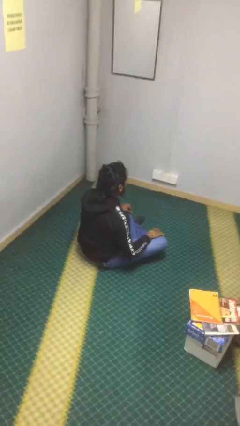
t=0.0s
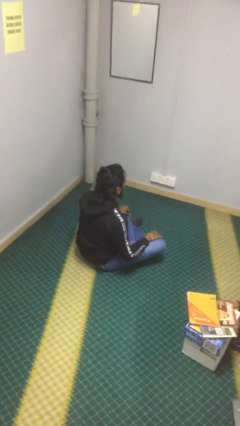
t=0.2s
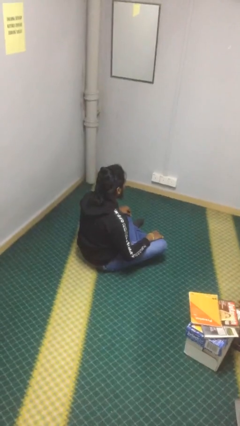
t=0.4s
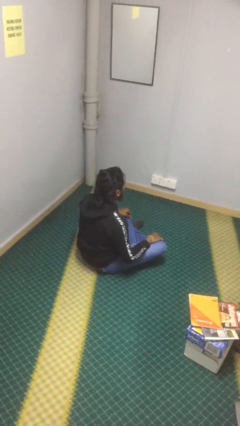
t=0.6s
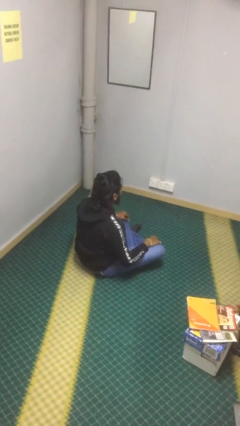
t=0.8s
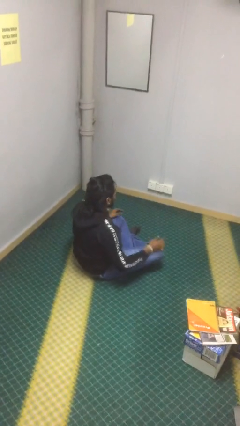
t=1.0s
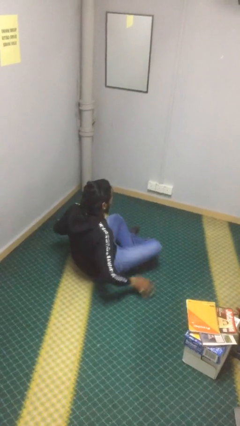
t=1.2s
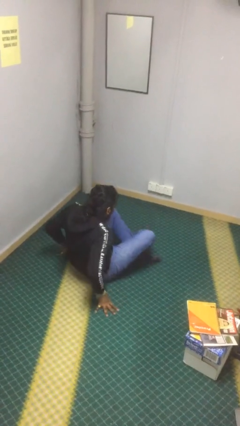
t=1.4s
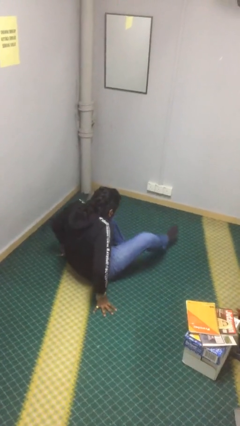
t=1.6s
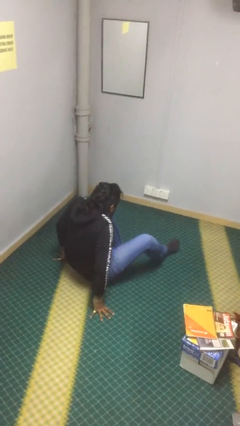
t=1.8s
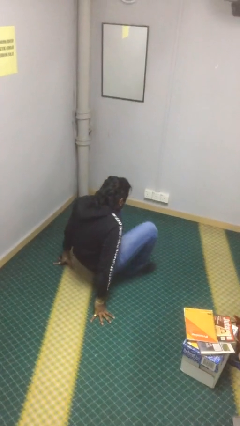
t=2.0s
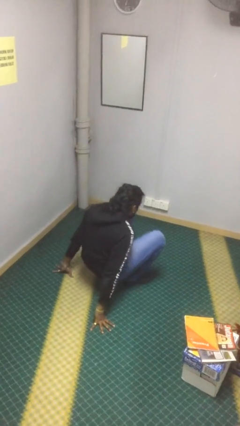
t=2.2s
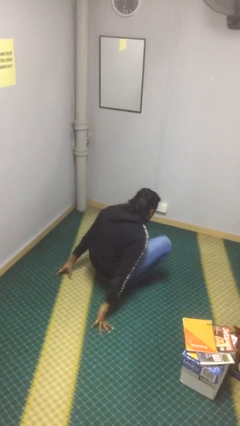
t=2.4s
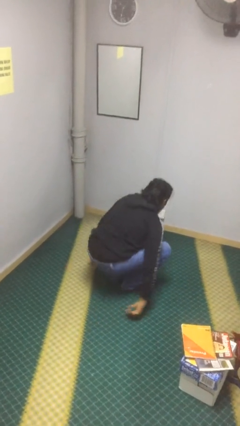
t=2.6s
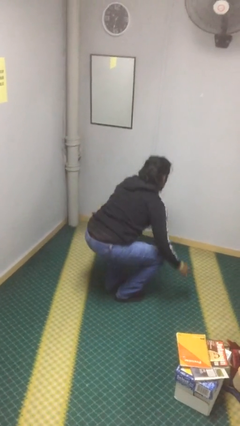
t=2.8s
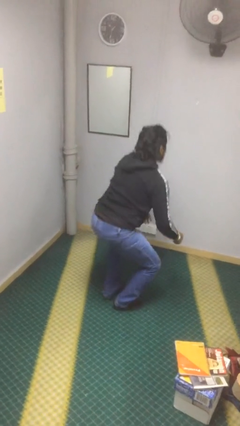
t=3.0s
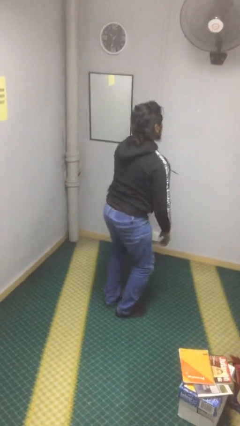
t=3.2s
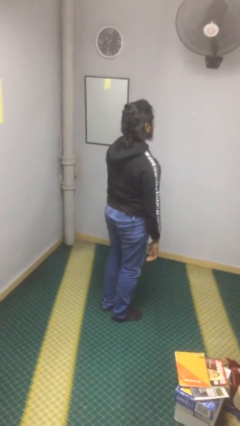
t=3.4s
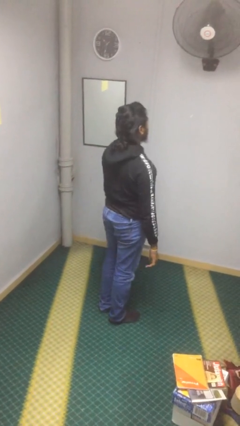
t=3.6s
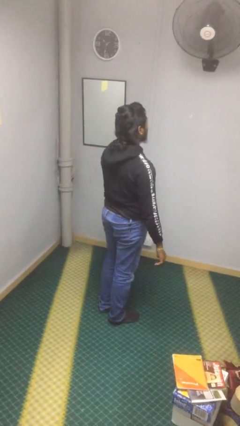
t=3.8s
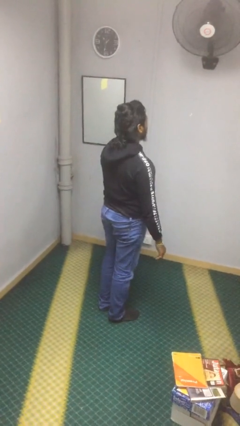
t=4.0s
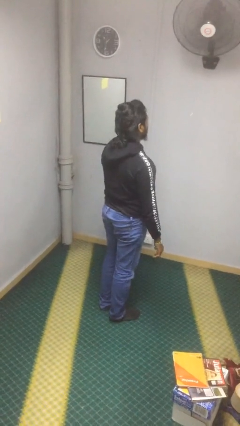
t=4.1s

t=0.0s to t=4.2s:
person stands up from floor

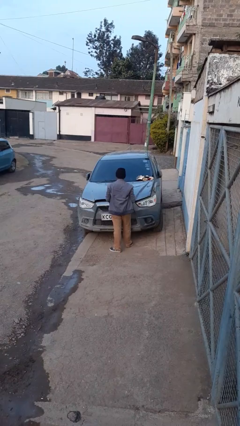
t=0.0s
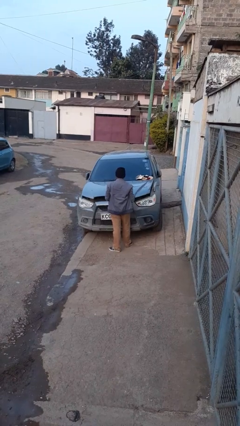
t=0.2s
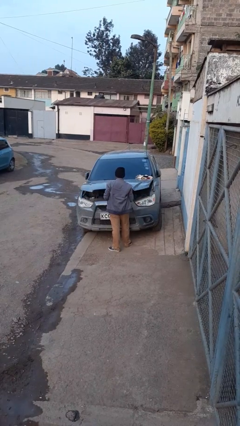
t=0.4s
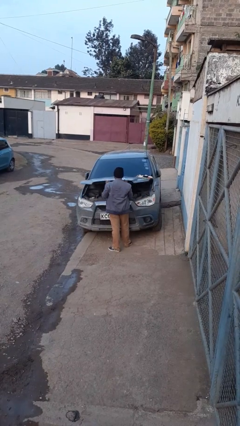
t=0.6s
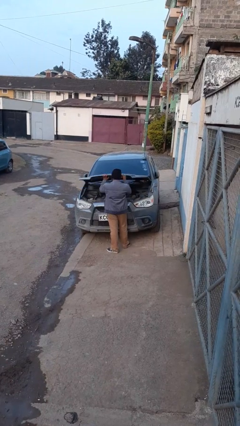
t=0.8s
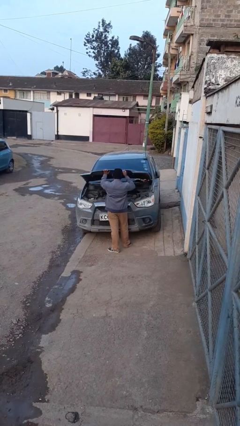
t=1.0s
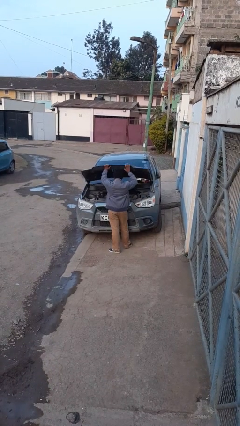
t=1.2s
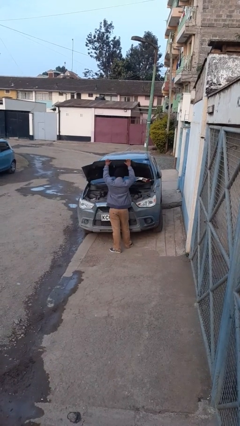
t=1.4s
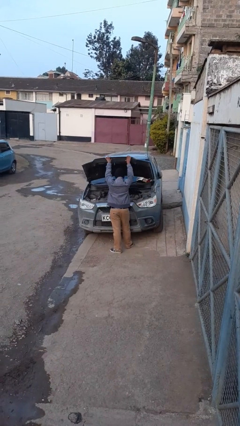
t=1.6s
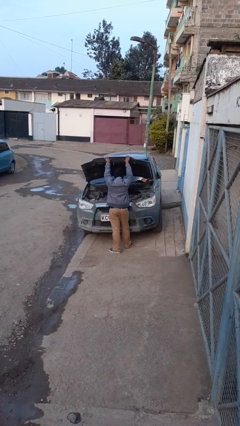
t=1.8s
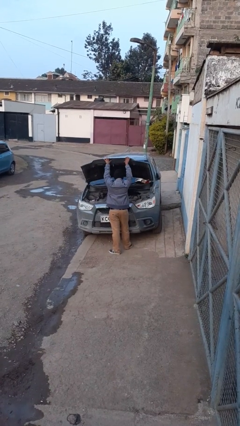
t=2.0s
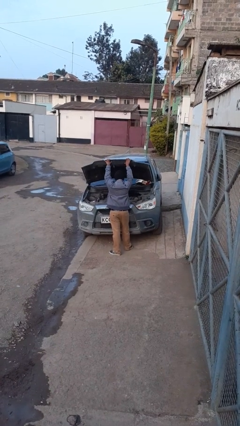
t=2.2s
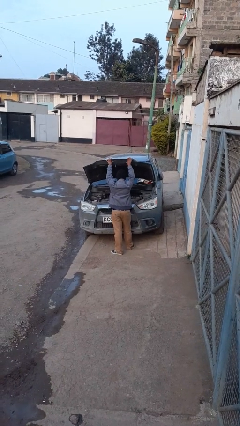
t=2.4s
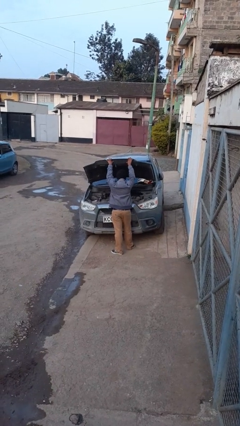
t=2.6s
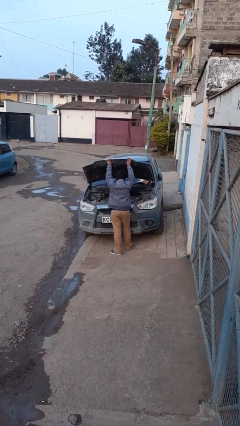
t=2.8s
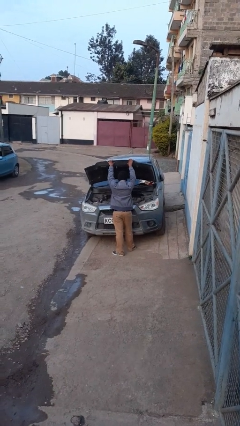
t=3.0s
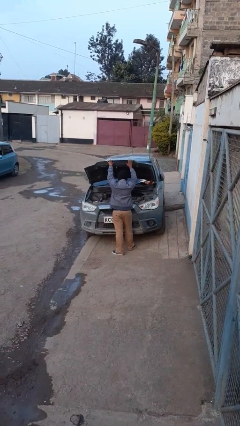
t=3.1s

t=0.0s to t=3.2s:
person opens car hood

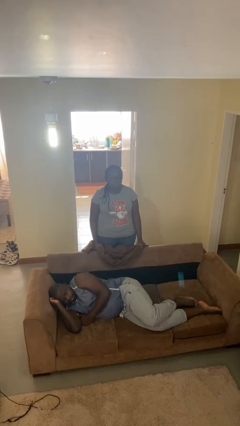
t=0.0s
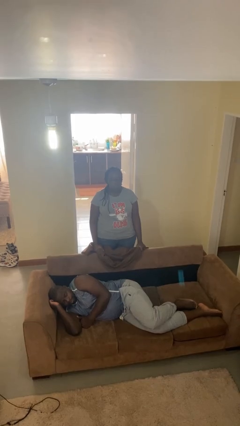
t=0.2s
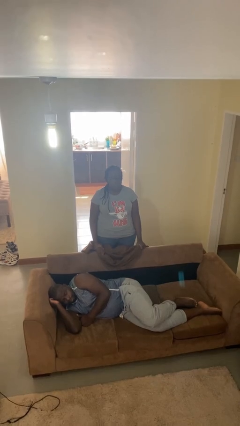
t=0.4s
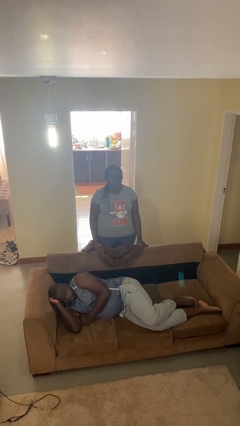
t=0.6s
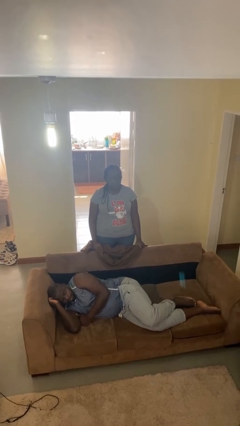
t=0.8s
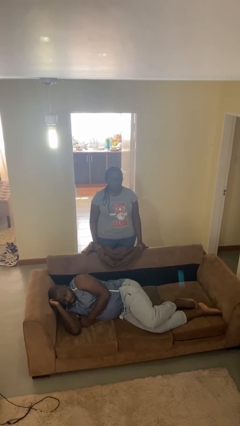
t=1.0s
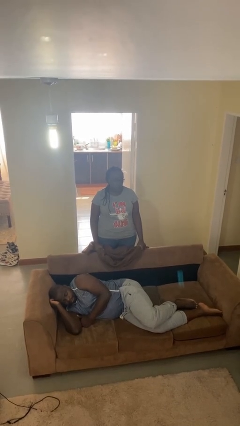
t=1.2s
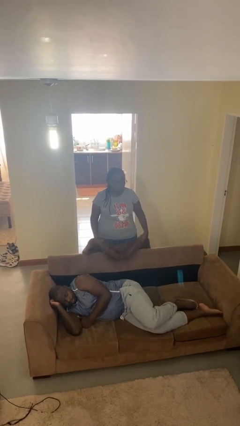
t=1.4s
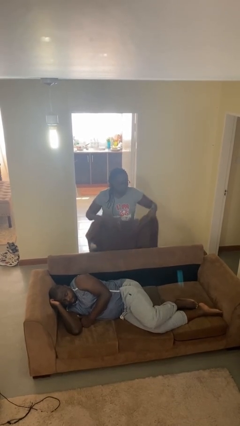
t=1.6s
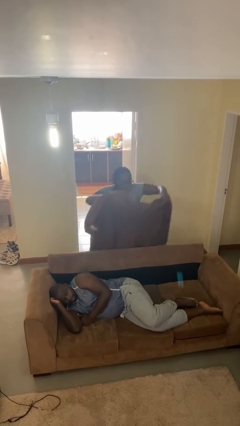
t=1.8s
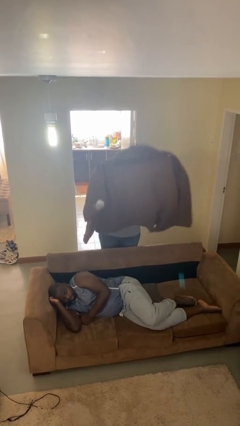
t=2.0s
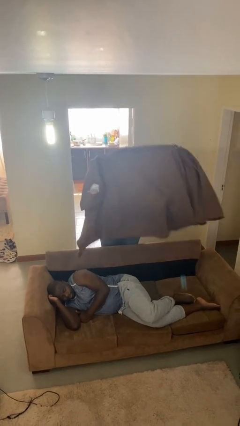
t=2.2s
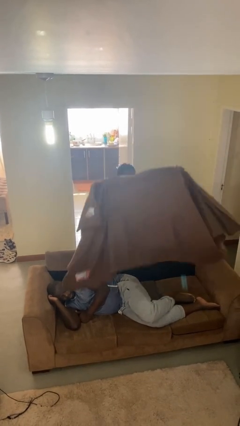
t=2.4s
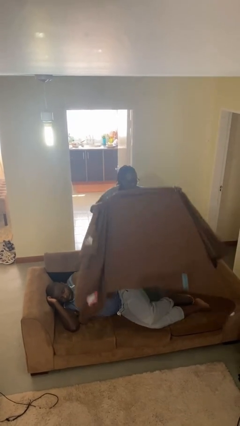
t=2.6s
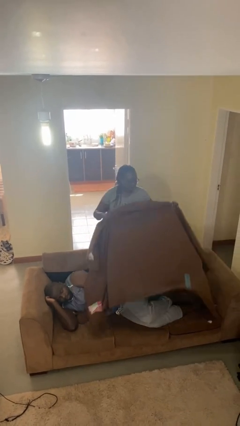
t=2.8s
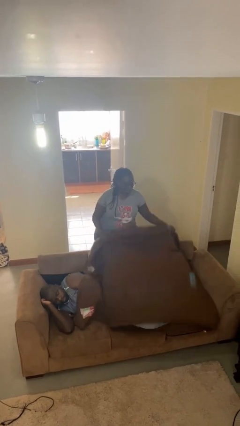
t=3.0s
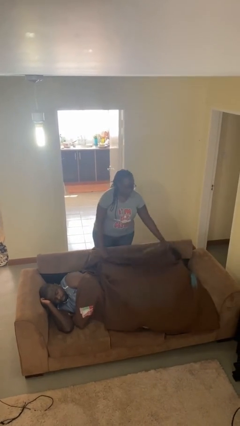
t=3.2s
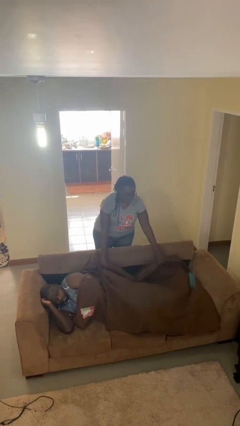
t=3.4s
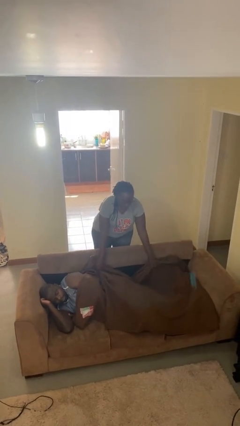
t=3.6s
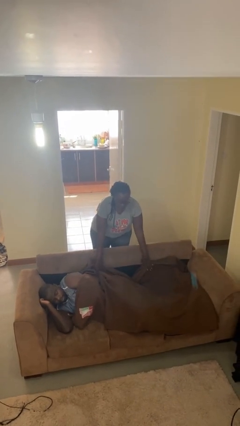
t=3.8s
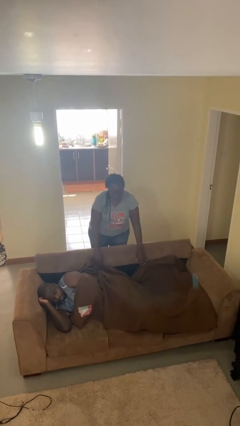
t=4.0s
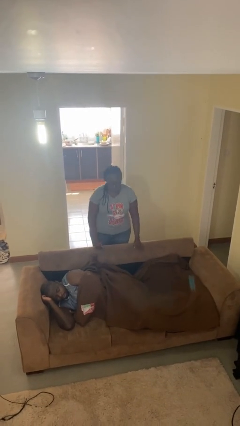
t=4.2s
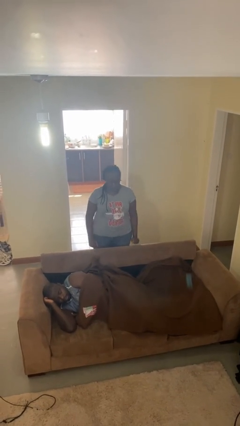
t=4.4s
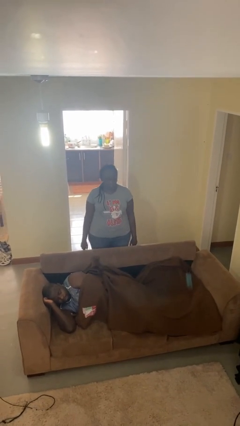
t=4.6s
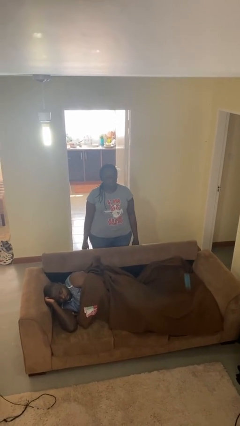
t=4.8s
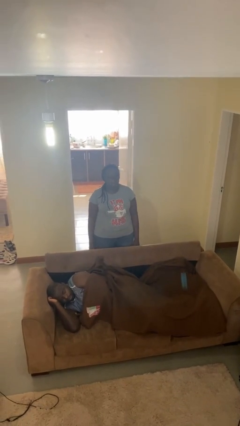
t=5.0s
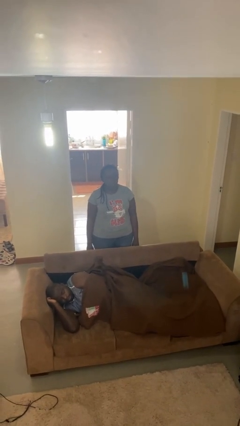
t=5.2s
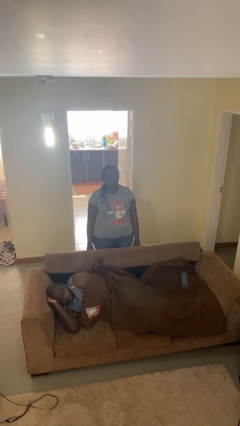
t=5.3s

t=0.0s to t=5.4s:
person covers friend with blanket

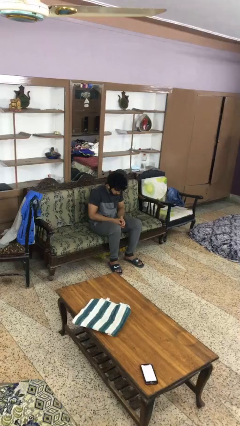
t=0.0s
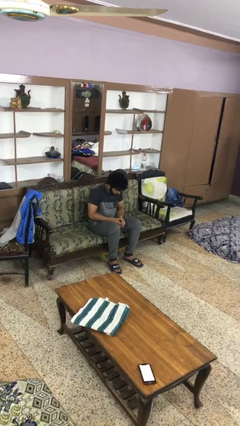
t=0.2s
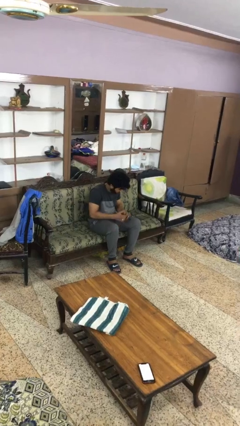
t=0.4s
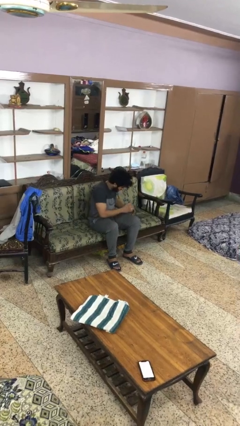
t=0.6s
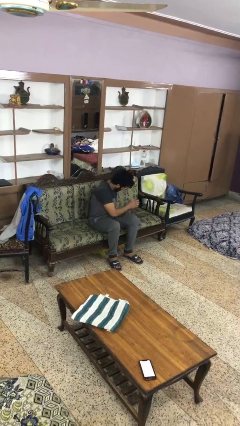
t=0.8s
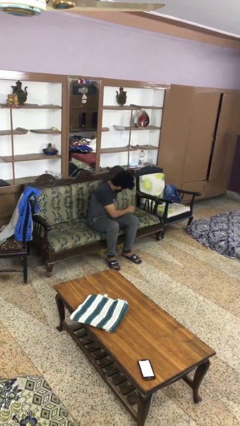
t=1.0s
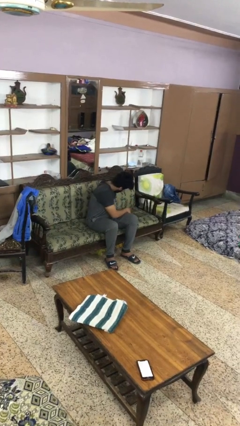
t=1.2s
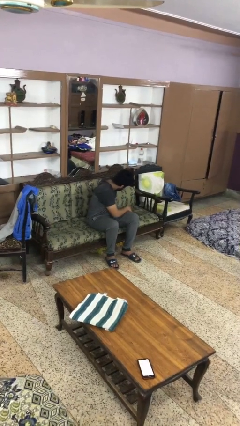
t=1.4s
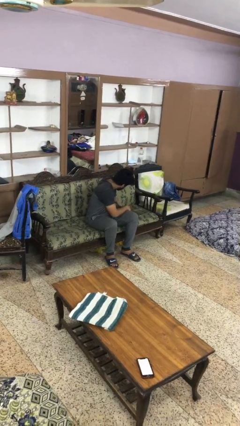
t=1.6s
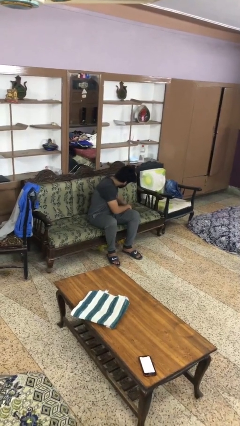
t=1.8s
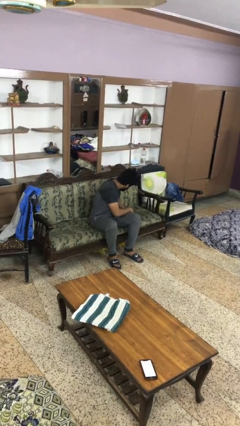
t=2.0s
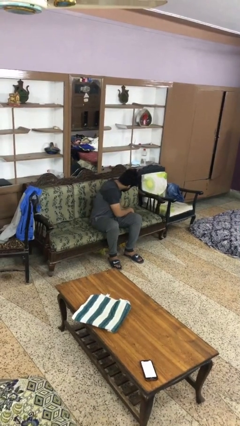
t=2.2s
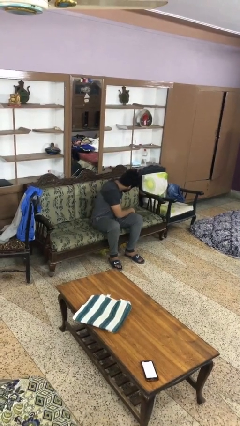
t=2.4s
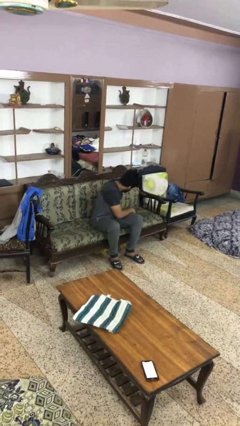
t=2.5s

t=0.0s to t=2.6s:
person searches in couch

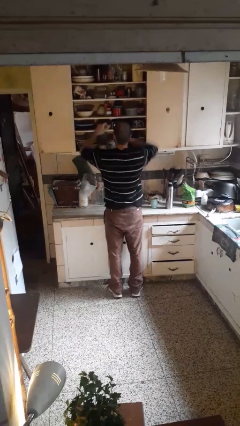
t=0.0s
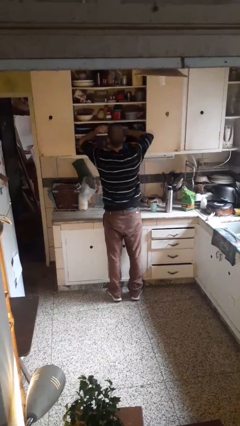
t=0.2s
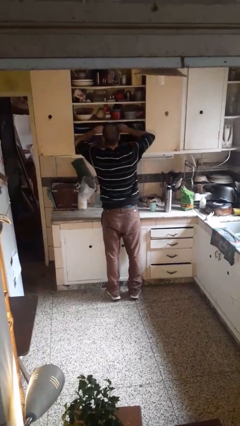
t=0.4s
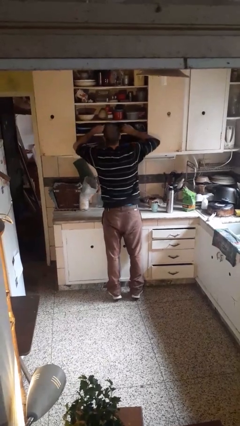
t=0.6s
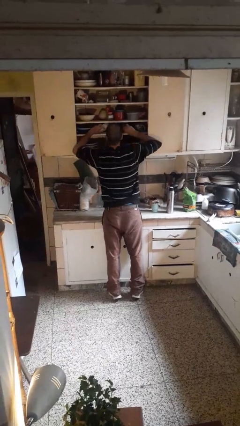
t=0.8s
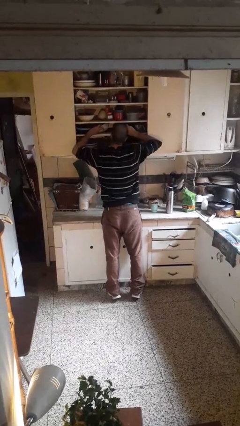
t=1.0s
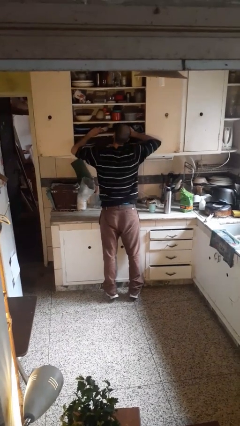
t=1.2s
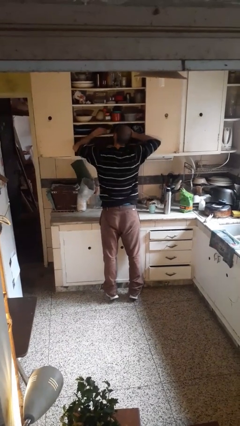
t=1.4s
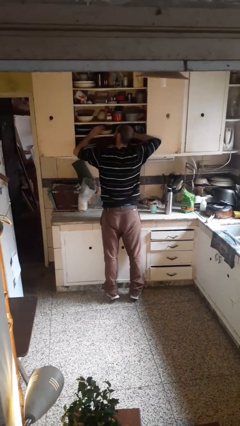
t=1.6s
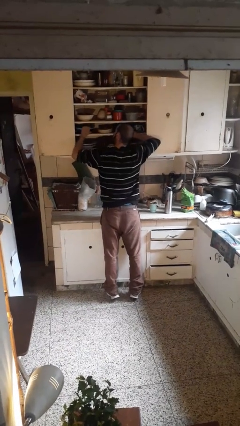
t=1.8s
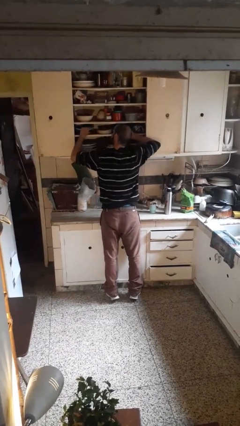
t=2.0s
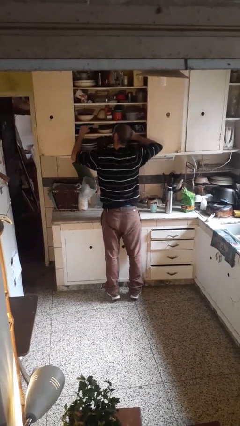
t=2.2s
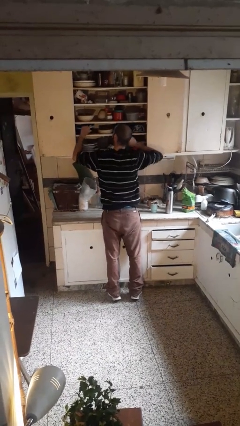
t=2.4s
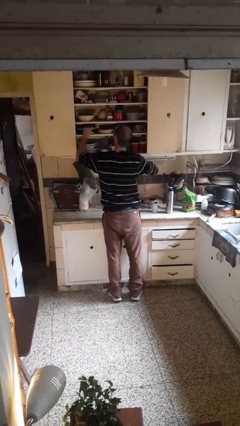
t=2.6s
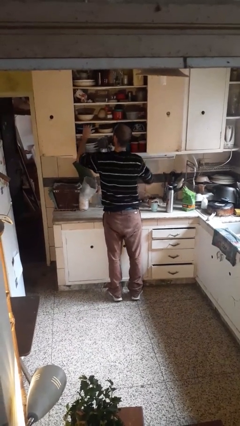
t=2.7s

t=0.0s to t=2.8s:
person searches in cabinet
